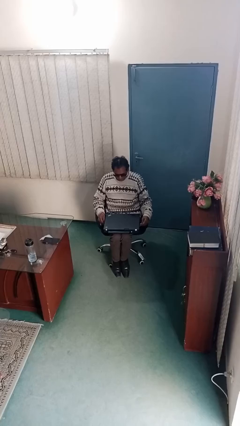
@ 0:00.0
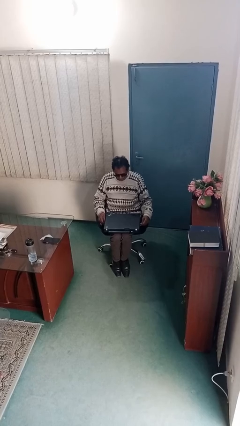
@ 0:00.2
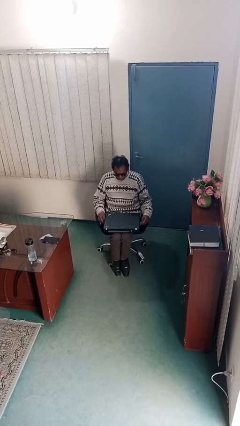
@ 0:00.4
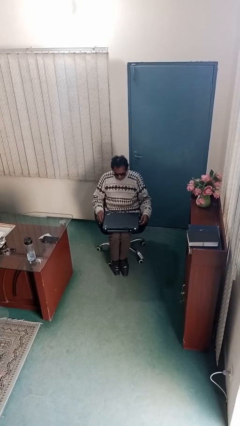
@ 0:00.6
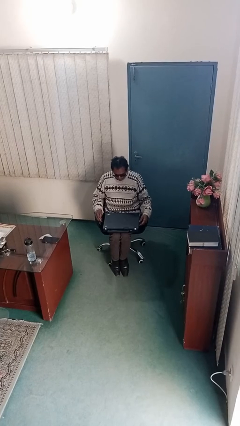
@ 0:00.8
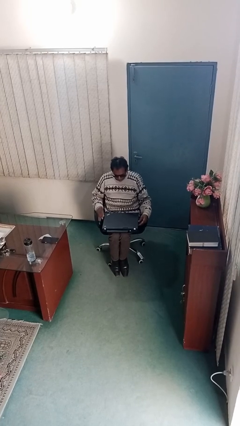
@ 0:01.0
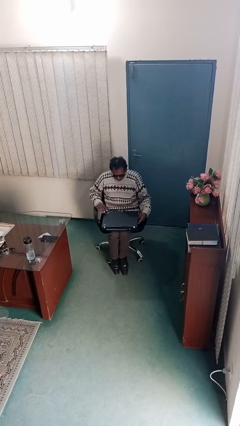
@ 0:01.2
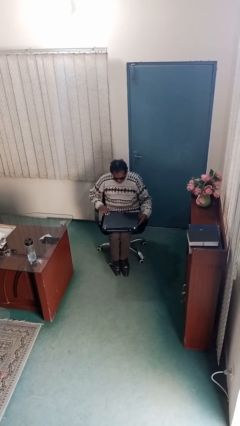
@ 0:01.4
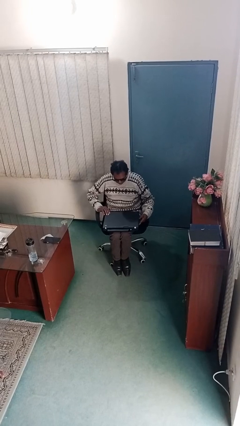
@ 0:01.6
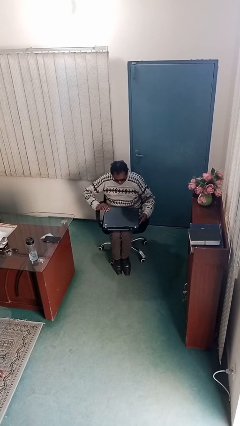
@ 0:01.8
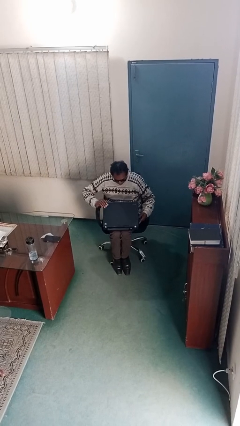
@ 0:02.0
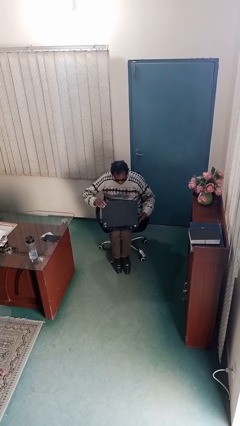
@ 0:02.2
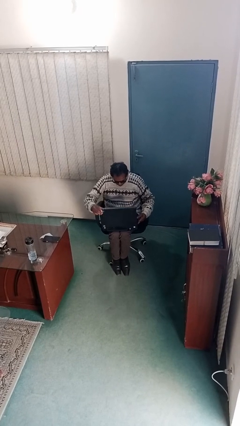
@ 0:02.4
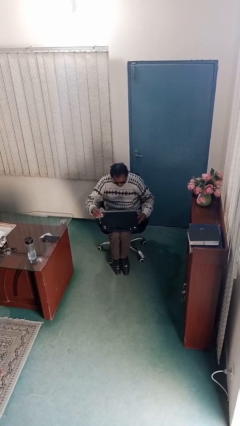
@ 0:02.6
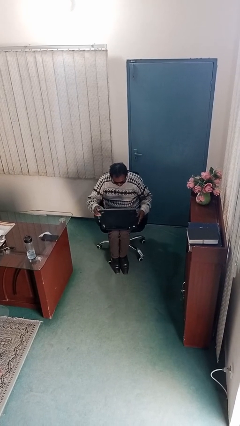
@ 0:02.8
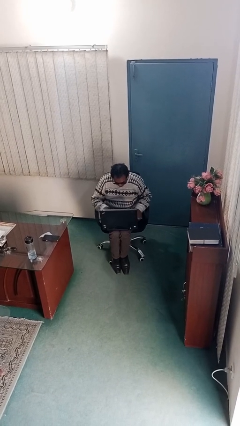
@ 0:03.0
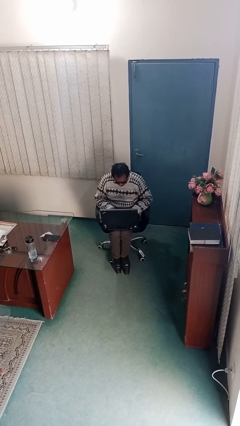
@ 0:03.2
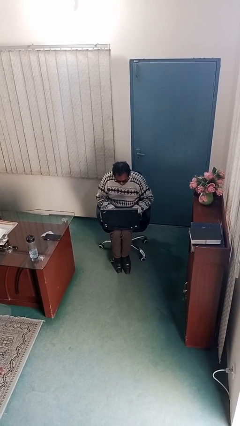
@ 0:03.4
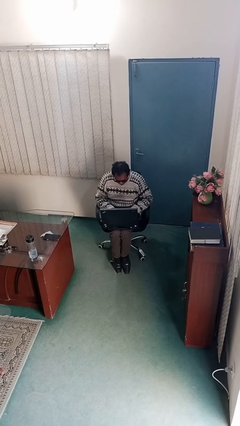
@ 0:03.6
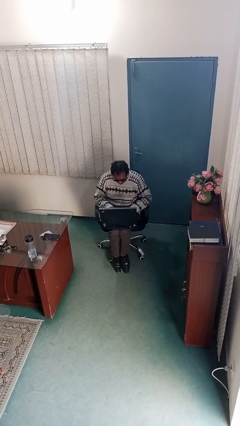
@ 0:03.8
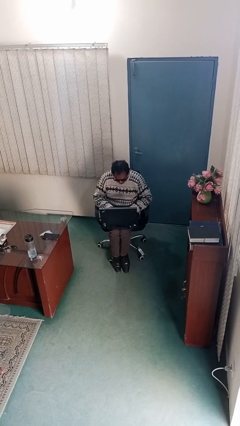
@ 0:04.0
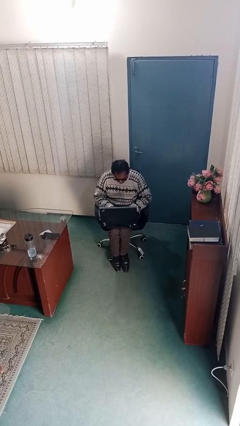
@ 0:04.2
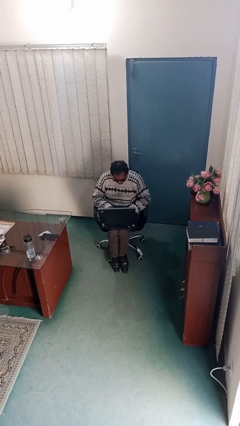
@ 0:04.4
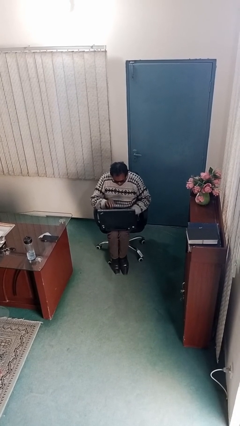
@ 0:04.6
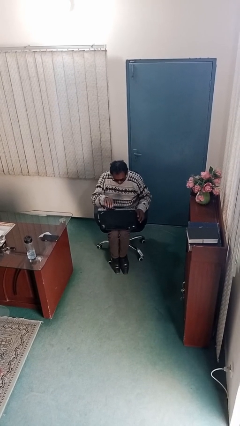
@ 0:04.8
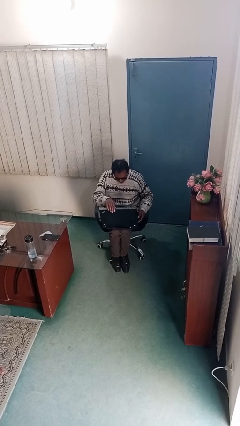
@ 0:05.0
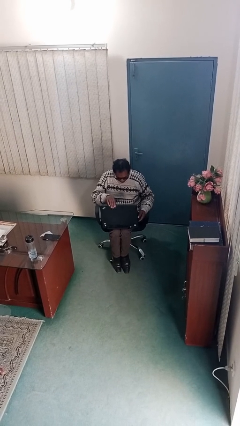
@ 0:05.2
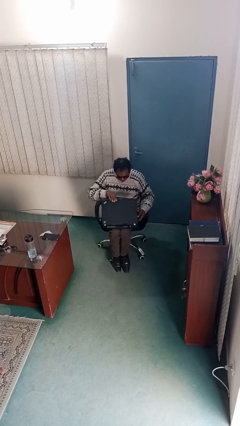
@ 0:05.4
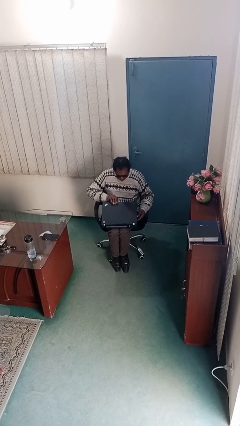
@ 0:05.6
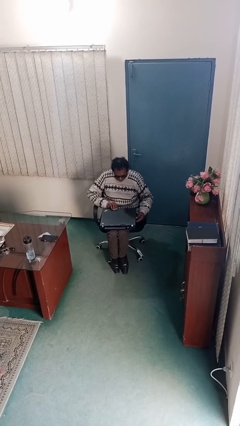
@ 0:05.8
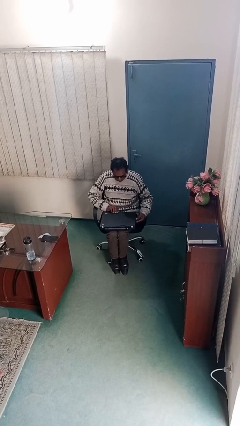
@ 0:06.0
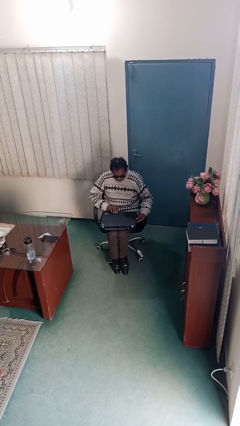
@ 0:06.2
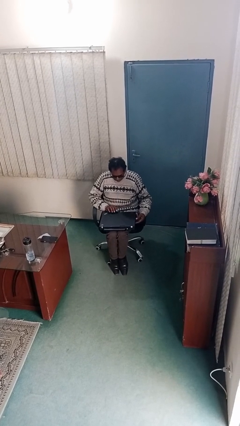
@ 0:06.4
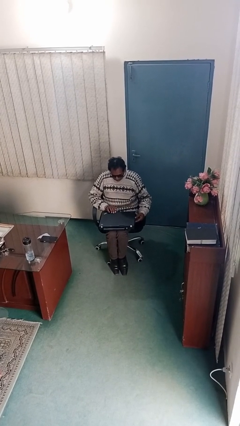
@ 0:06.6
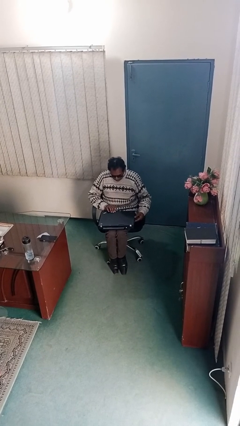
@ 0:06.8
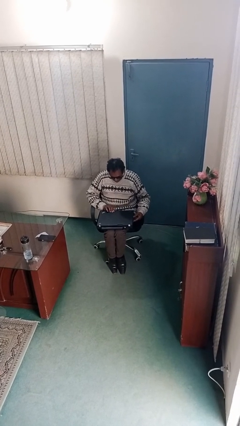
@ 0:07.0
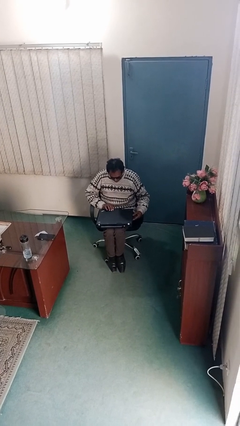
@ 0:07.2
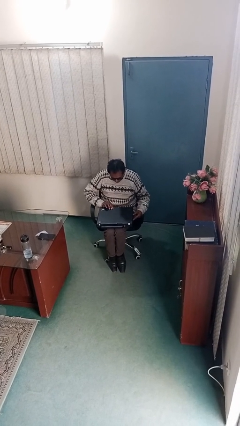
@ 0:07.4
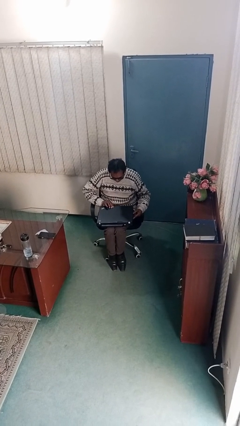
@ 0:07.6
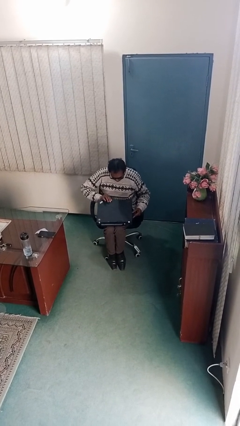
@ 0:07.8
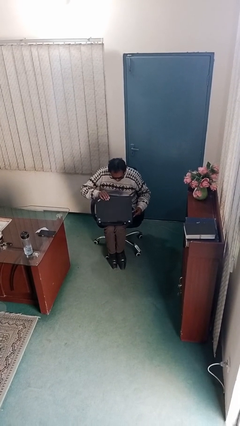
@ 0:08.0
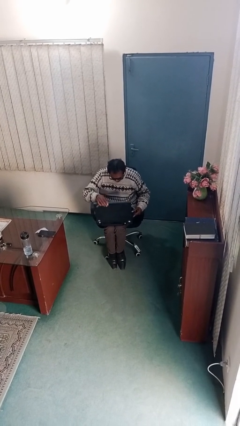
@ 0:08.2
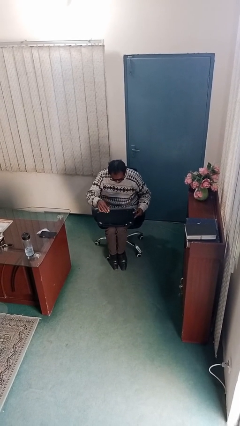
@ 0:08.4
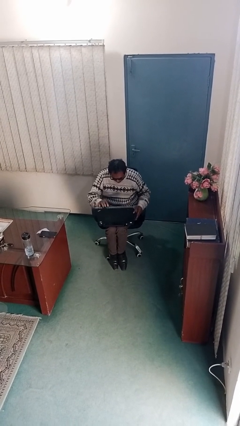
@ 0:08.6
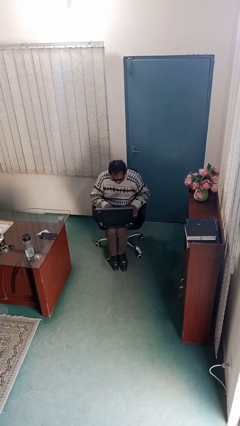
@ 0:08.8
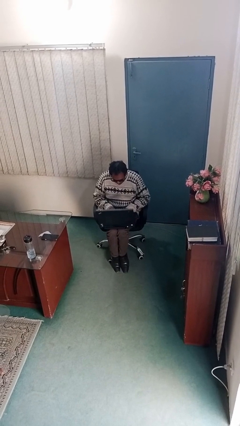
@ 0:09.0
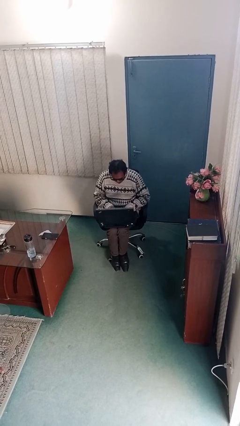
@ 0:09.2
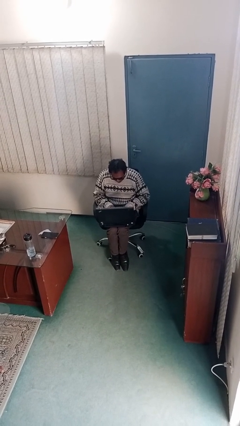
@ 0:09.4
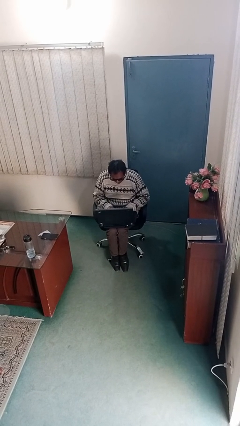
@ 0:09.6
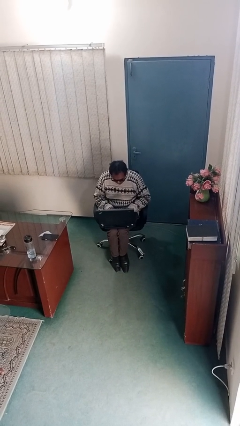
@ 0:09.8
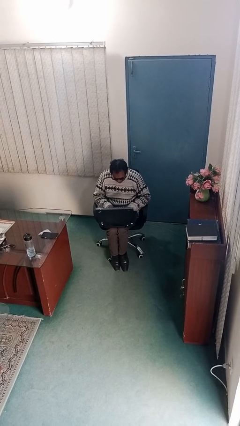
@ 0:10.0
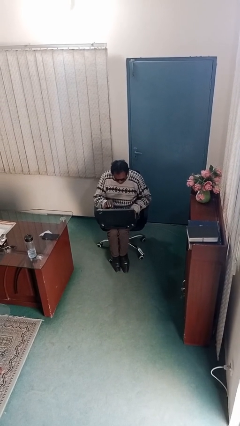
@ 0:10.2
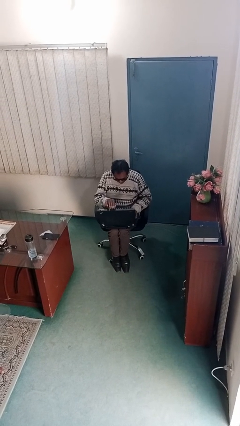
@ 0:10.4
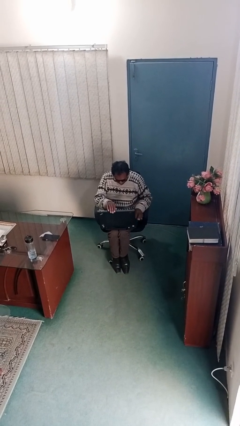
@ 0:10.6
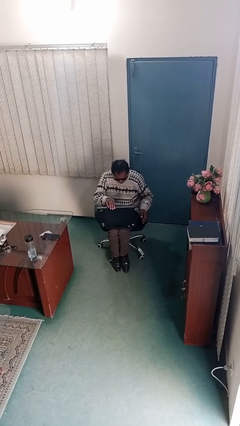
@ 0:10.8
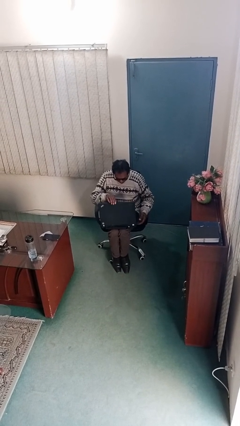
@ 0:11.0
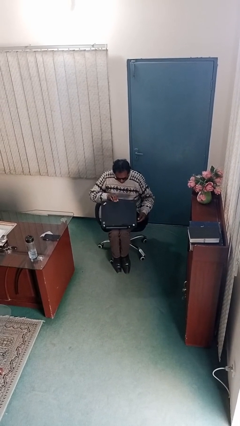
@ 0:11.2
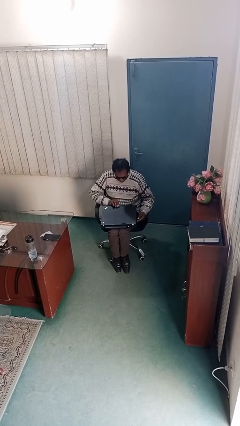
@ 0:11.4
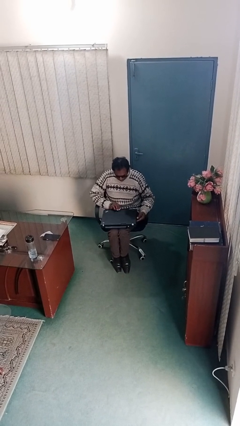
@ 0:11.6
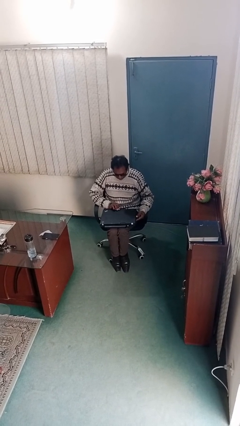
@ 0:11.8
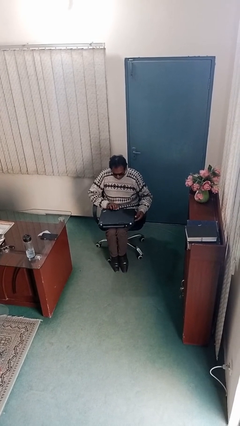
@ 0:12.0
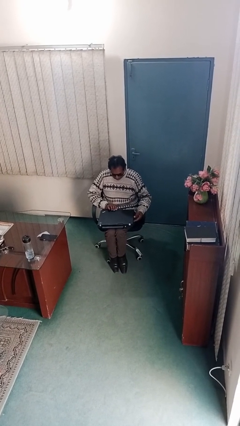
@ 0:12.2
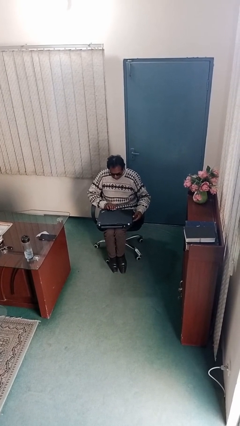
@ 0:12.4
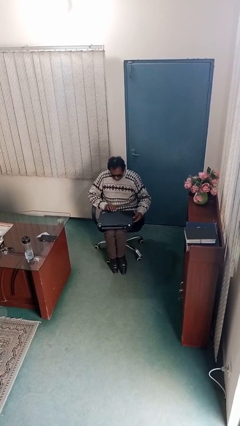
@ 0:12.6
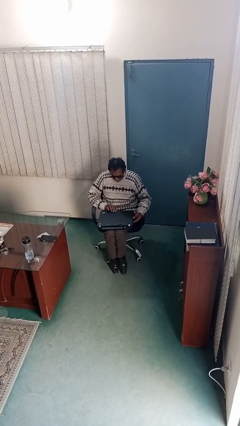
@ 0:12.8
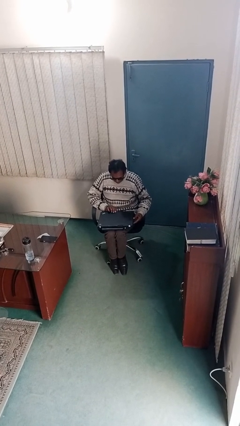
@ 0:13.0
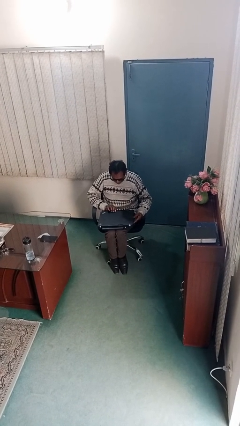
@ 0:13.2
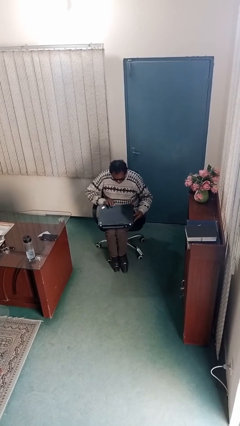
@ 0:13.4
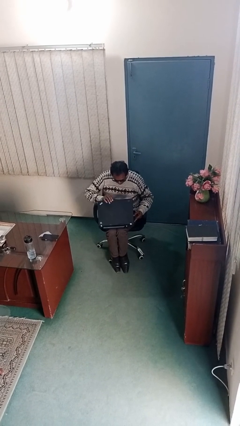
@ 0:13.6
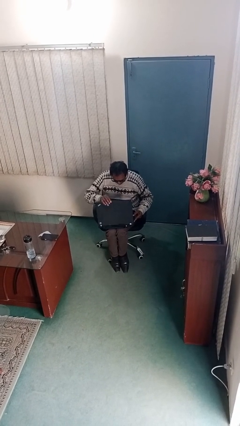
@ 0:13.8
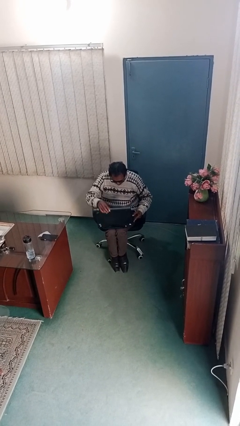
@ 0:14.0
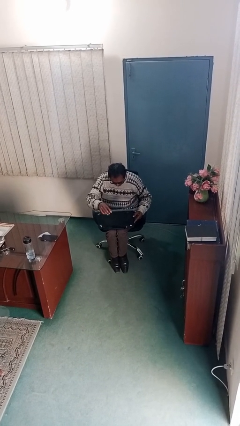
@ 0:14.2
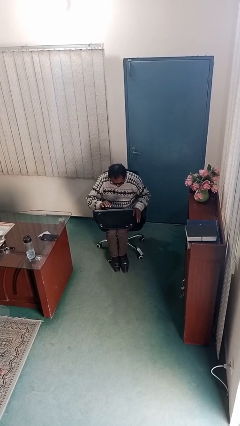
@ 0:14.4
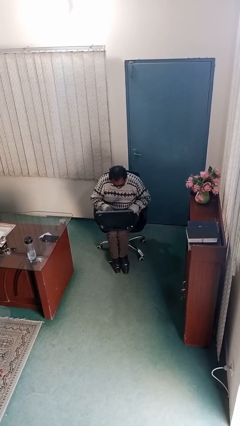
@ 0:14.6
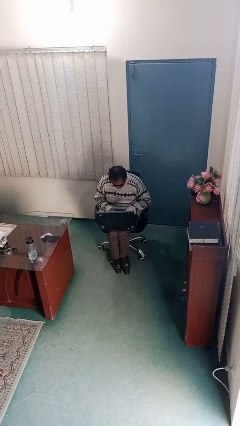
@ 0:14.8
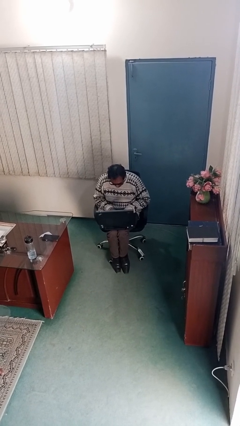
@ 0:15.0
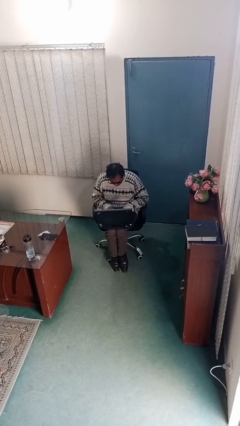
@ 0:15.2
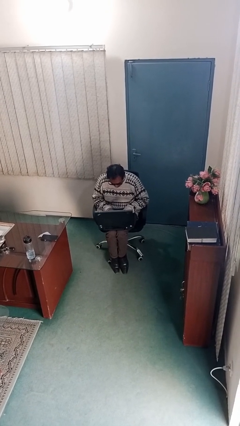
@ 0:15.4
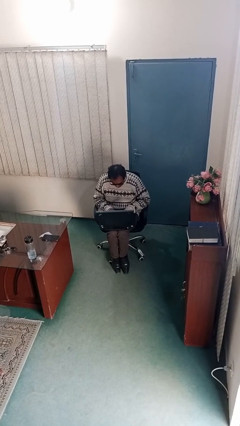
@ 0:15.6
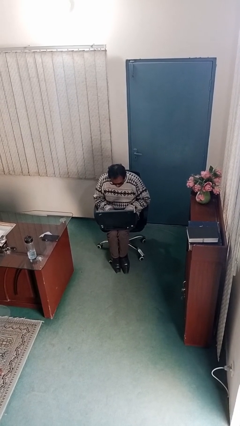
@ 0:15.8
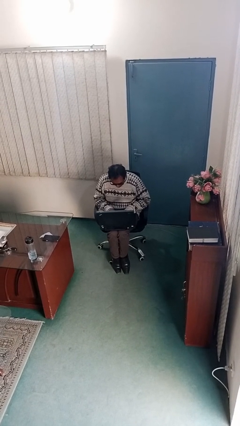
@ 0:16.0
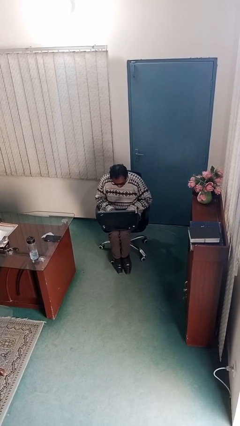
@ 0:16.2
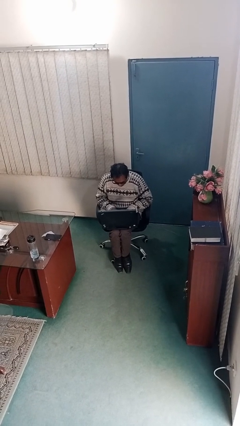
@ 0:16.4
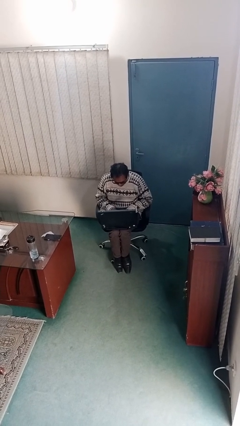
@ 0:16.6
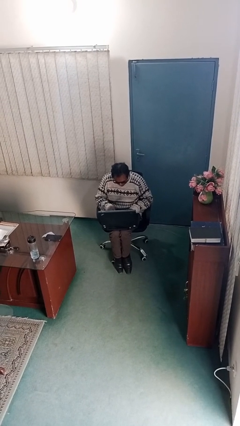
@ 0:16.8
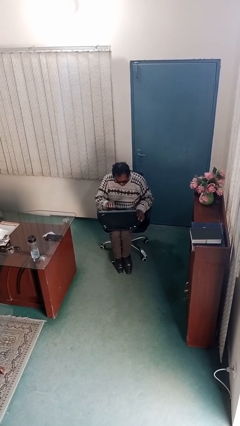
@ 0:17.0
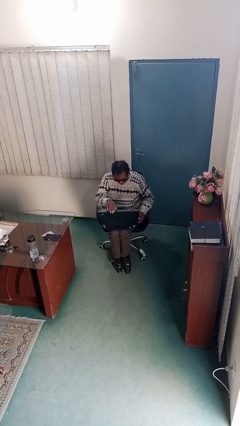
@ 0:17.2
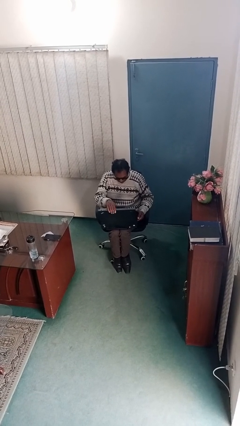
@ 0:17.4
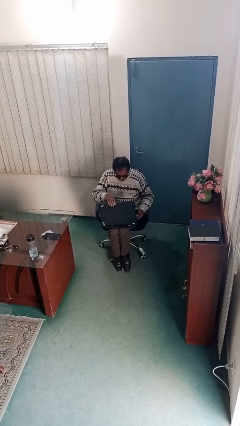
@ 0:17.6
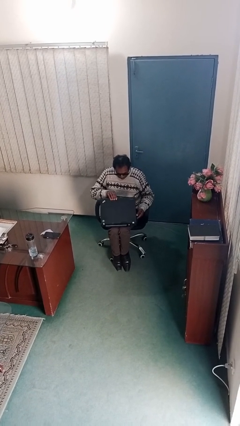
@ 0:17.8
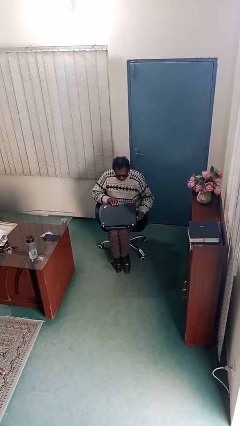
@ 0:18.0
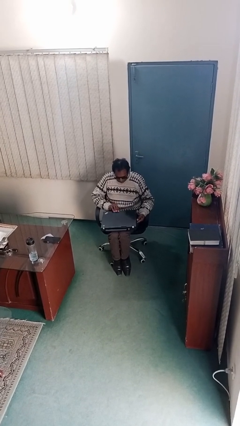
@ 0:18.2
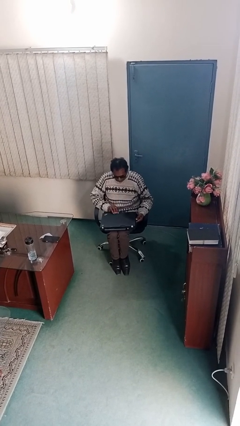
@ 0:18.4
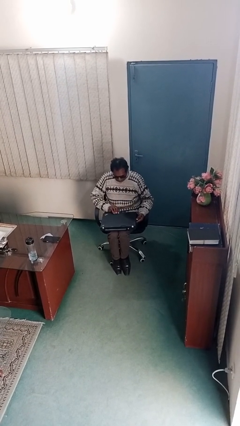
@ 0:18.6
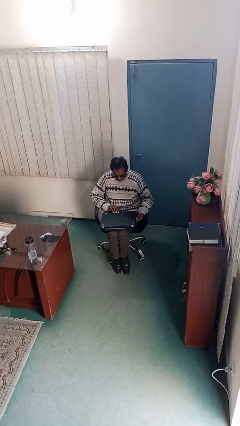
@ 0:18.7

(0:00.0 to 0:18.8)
person interacts with laptop
